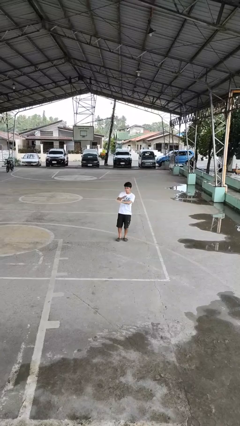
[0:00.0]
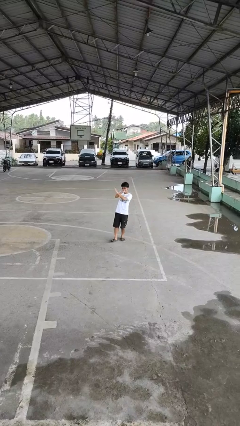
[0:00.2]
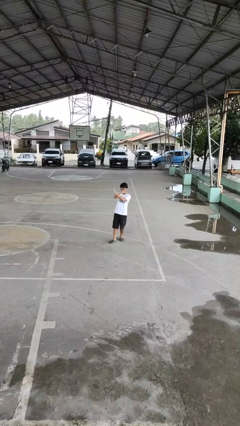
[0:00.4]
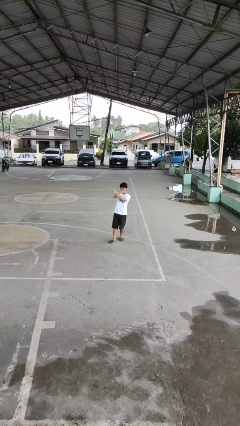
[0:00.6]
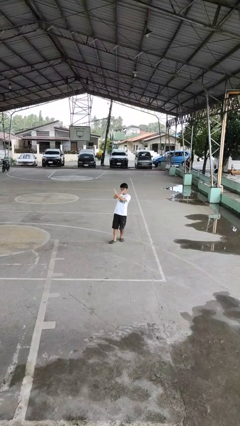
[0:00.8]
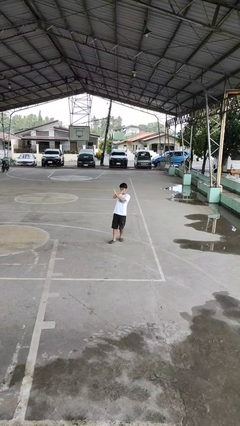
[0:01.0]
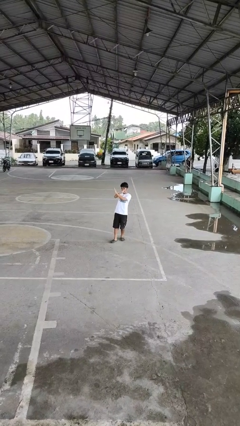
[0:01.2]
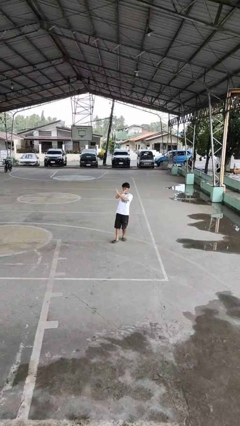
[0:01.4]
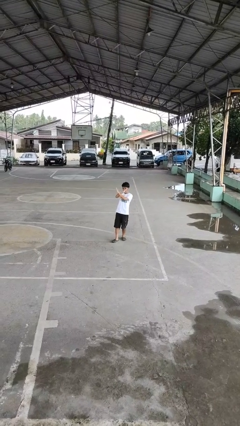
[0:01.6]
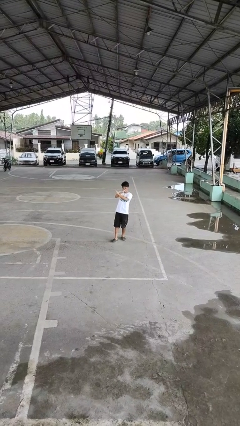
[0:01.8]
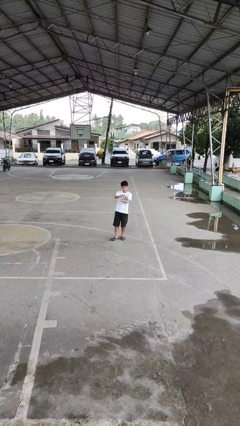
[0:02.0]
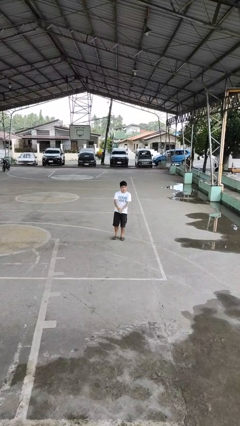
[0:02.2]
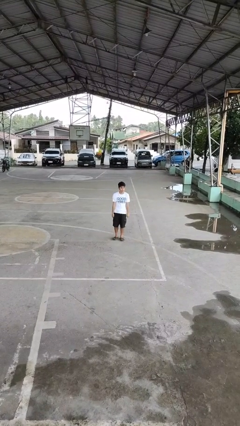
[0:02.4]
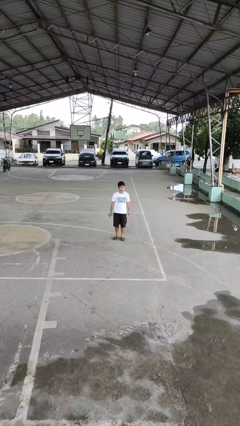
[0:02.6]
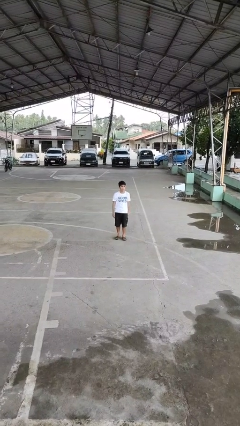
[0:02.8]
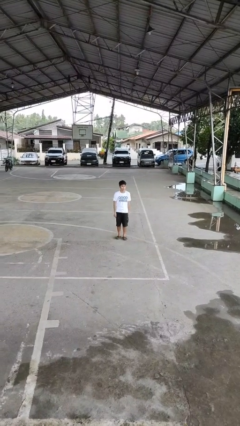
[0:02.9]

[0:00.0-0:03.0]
person gestures arms x

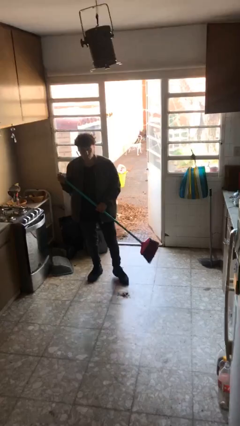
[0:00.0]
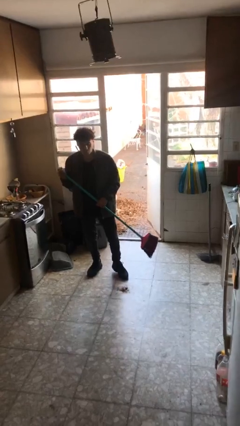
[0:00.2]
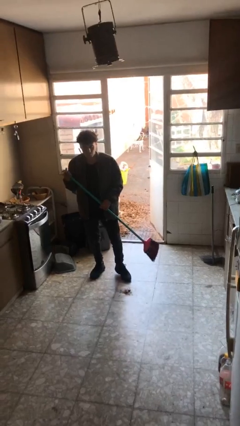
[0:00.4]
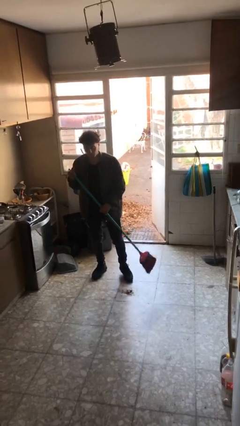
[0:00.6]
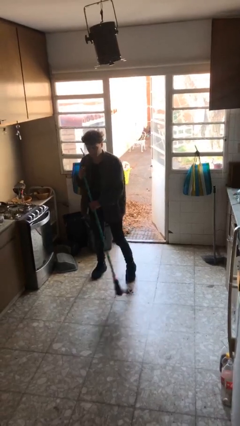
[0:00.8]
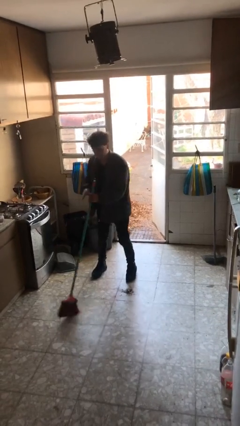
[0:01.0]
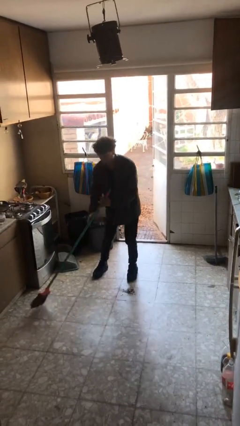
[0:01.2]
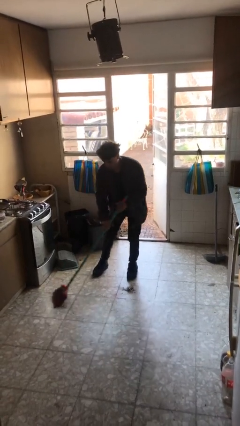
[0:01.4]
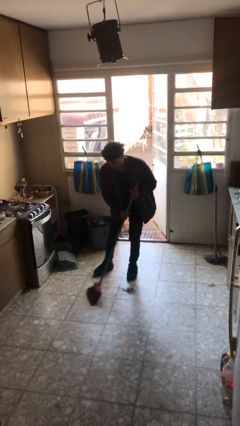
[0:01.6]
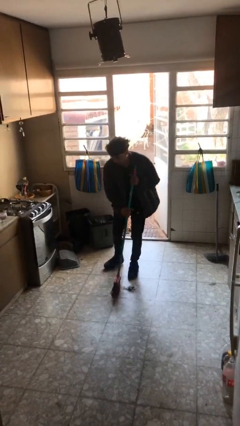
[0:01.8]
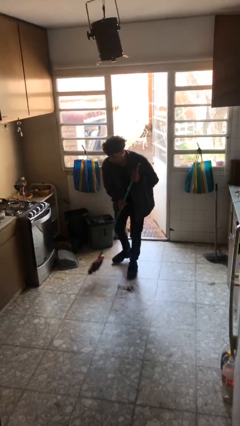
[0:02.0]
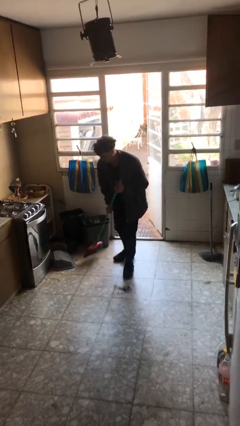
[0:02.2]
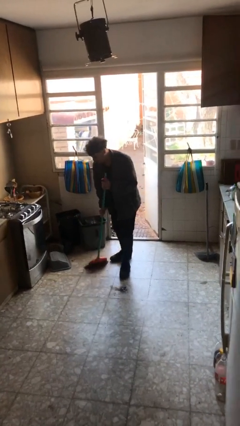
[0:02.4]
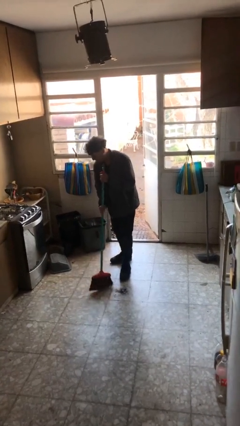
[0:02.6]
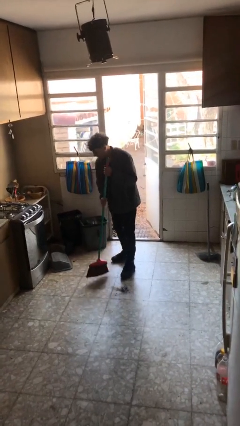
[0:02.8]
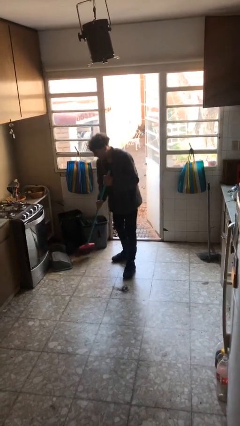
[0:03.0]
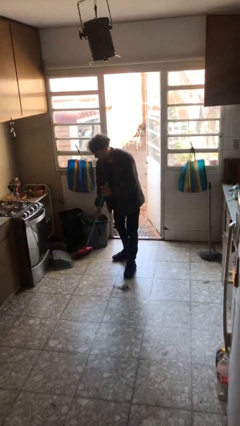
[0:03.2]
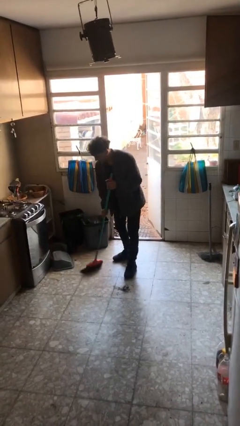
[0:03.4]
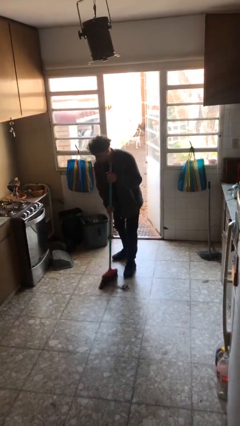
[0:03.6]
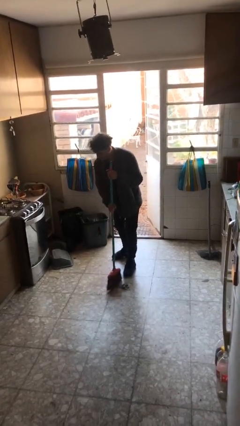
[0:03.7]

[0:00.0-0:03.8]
person sweeps floor

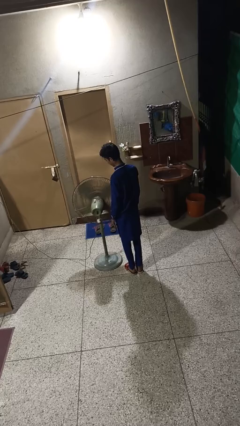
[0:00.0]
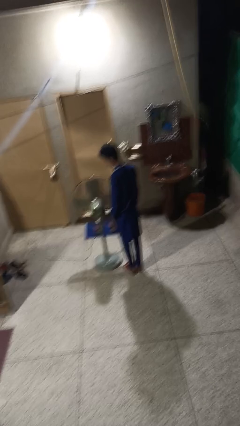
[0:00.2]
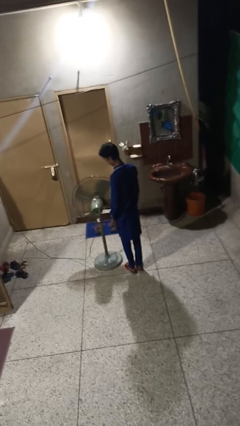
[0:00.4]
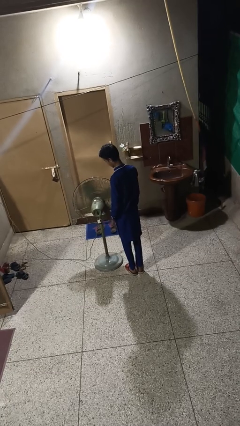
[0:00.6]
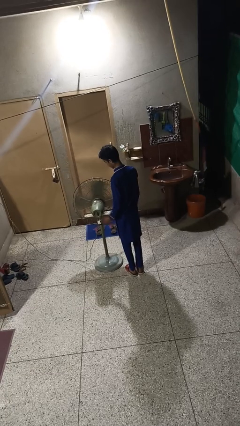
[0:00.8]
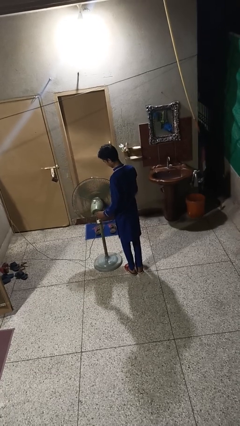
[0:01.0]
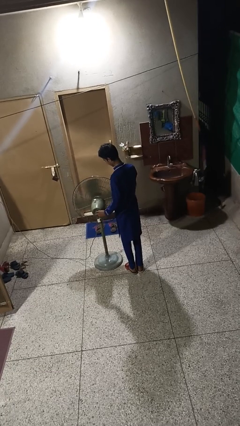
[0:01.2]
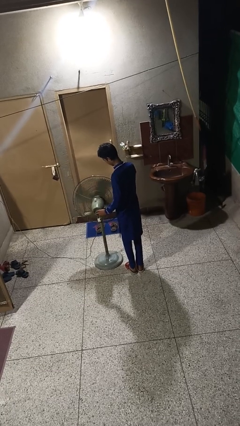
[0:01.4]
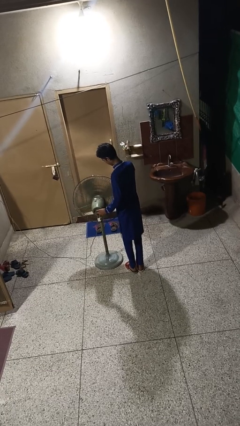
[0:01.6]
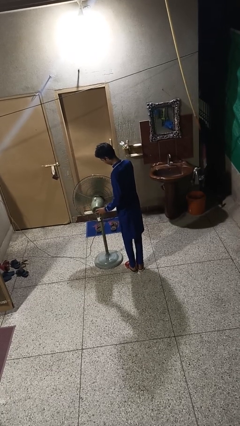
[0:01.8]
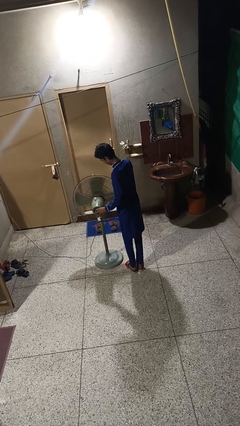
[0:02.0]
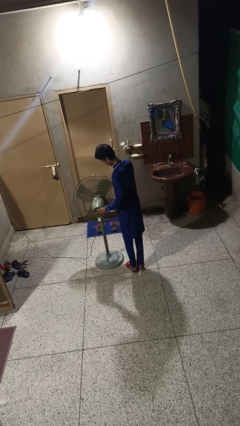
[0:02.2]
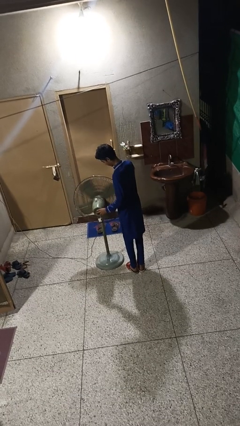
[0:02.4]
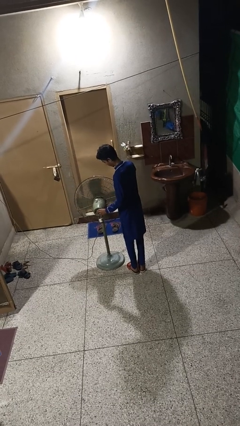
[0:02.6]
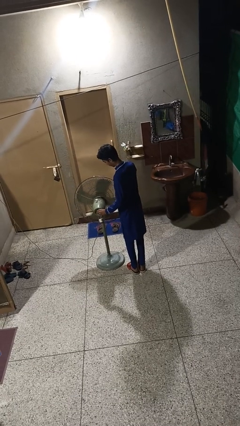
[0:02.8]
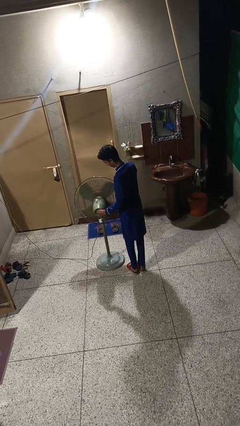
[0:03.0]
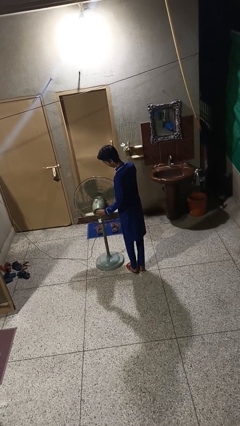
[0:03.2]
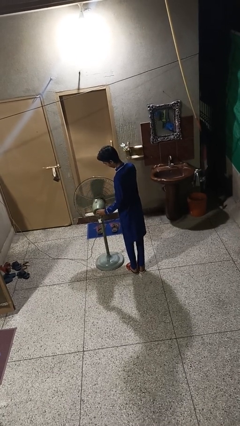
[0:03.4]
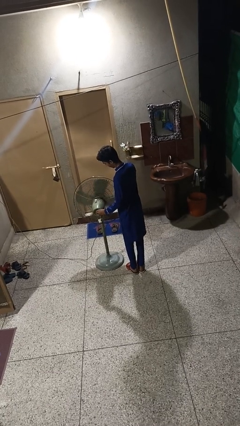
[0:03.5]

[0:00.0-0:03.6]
person turns off fan

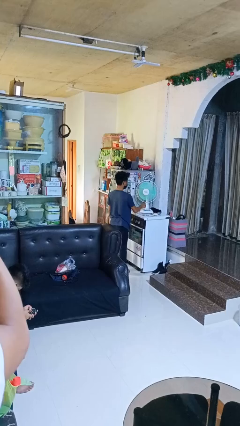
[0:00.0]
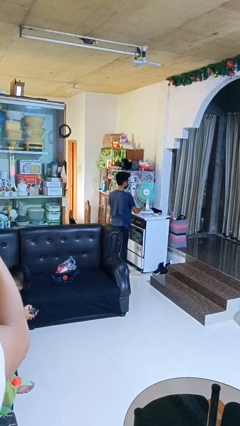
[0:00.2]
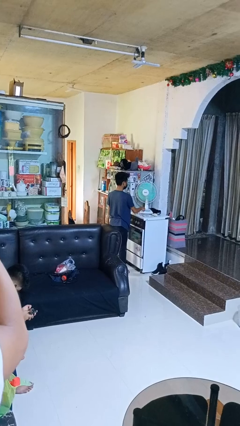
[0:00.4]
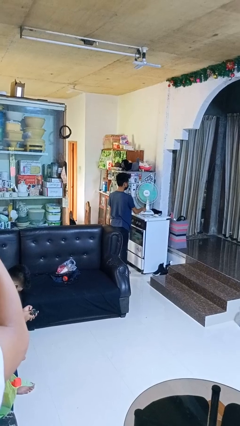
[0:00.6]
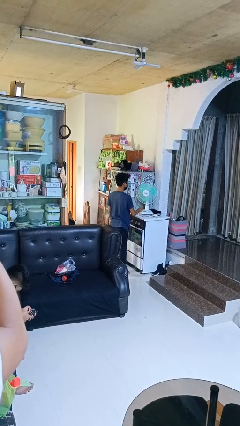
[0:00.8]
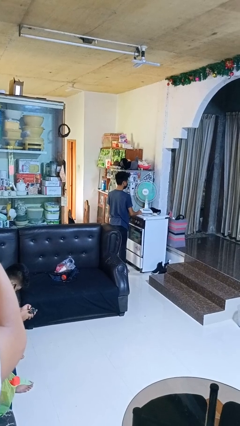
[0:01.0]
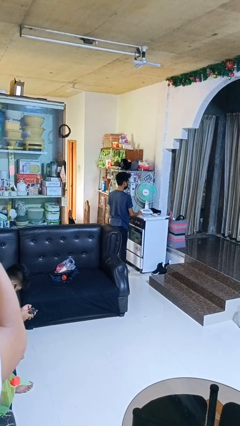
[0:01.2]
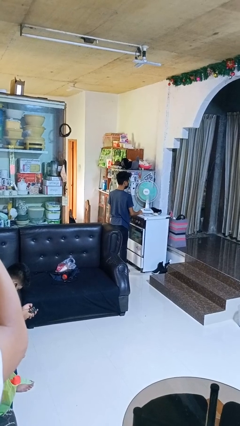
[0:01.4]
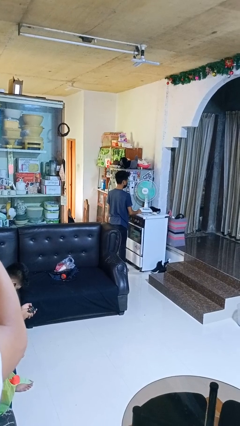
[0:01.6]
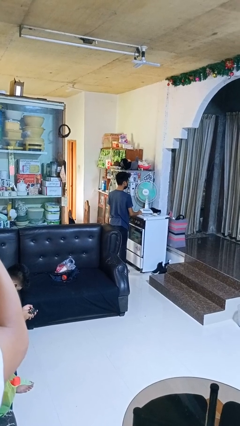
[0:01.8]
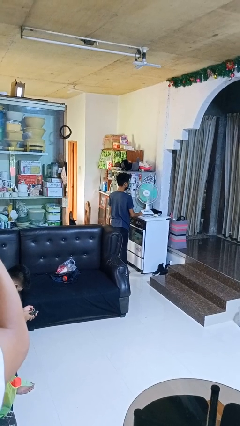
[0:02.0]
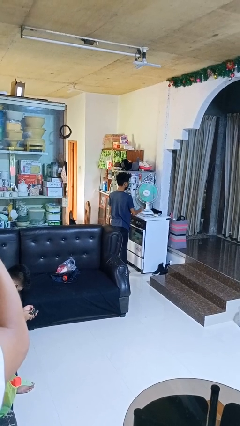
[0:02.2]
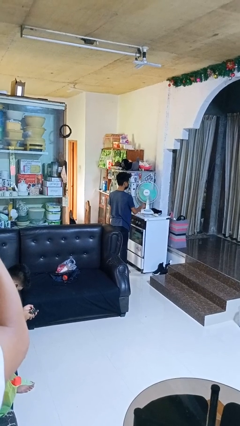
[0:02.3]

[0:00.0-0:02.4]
person turns on fan

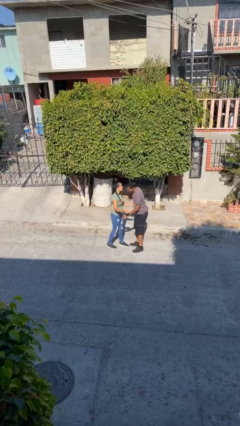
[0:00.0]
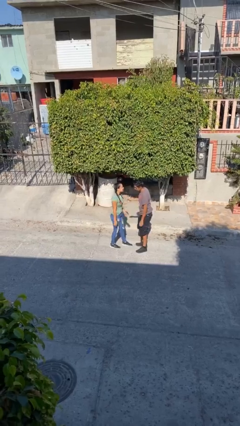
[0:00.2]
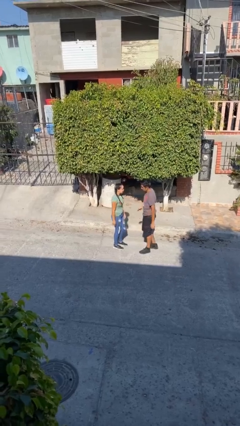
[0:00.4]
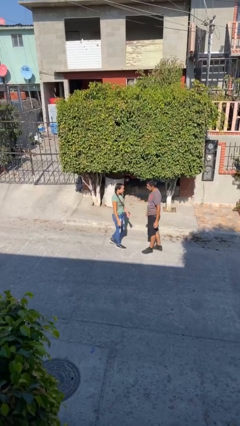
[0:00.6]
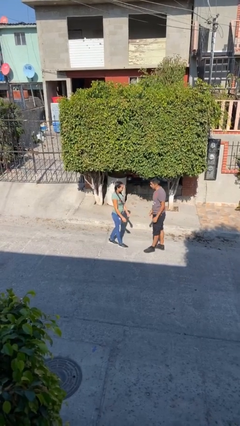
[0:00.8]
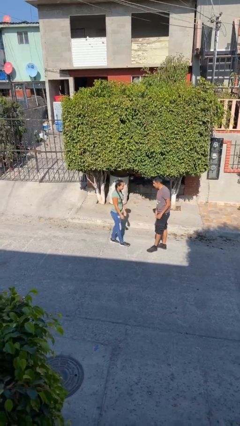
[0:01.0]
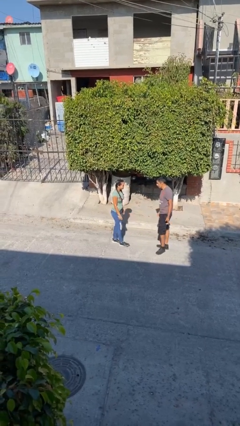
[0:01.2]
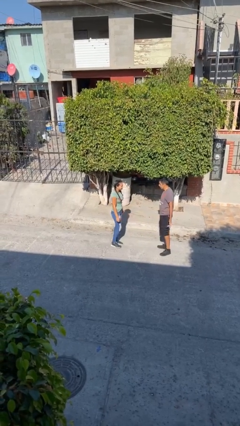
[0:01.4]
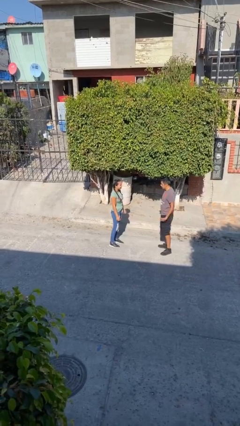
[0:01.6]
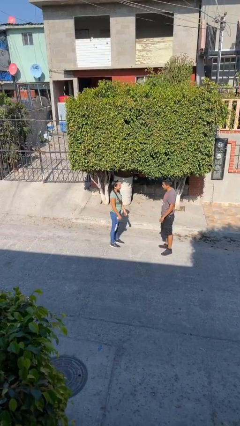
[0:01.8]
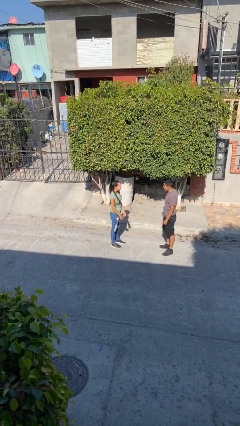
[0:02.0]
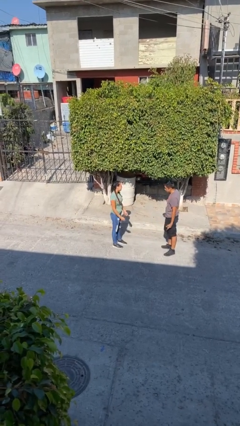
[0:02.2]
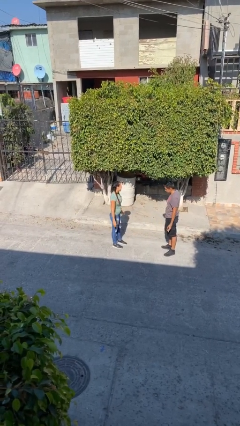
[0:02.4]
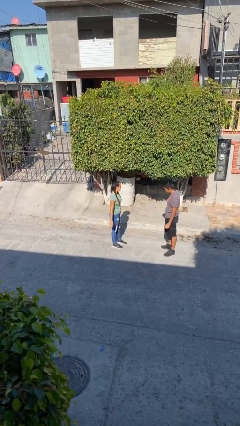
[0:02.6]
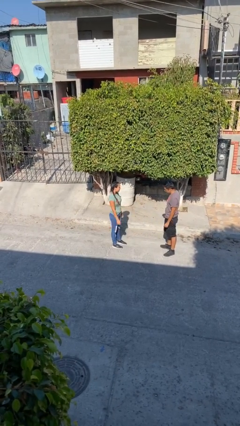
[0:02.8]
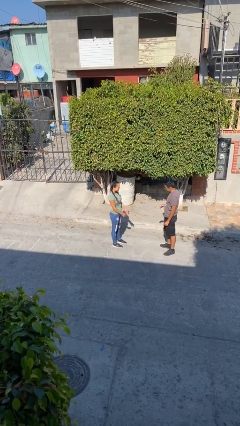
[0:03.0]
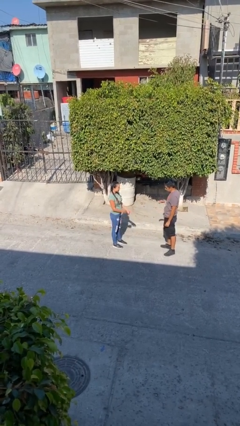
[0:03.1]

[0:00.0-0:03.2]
person talks to person

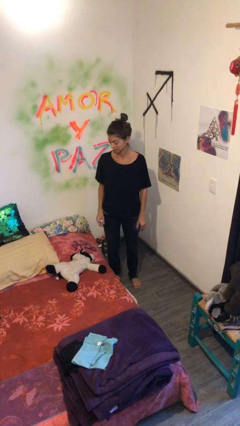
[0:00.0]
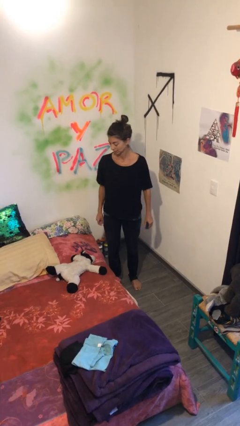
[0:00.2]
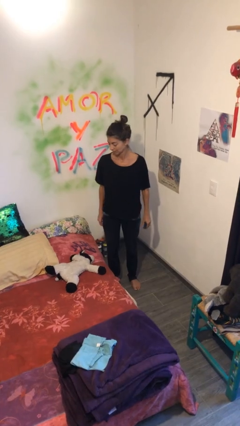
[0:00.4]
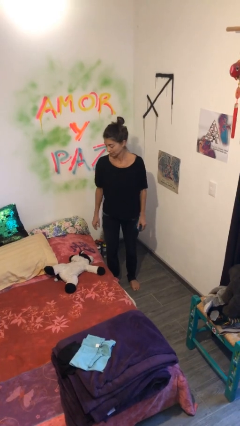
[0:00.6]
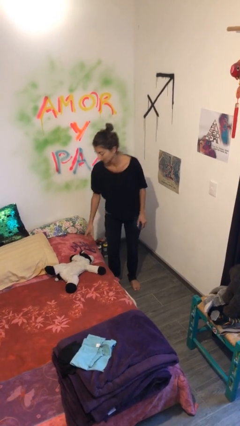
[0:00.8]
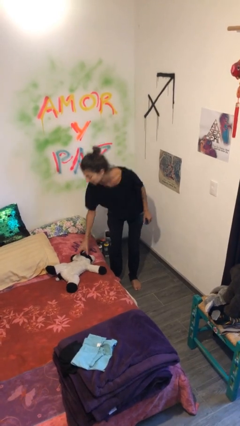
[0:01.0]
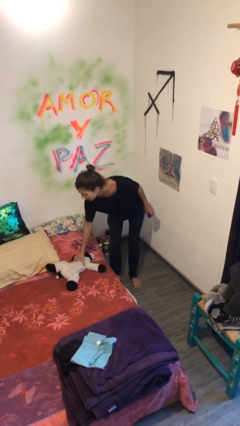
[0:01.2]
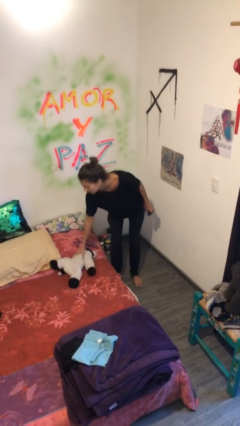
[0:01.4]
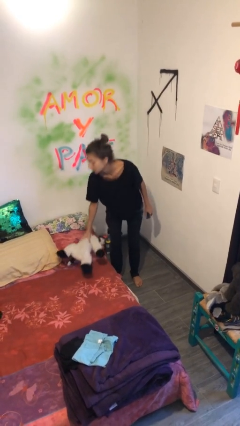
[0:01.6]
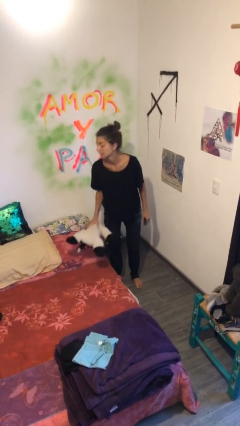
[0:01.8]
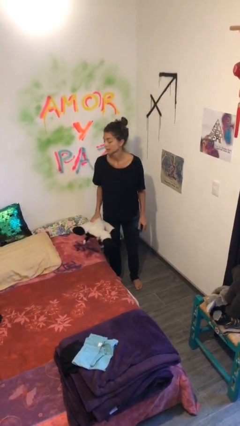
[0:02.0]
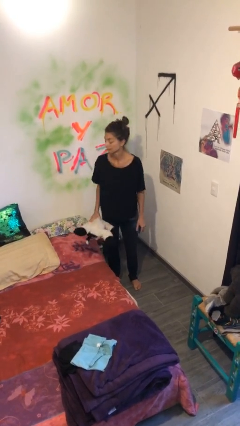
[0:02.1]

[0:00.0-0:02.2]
person picks up object from bed
